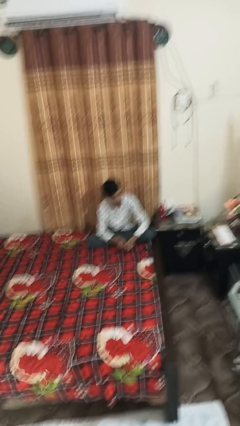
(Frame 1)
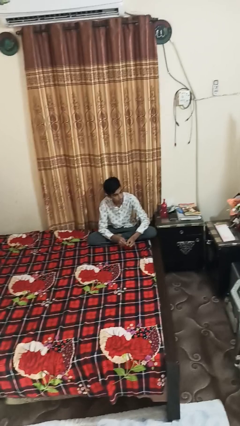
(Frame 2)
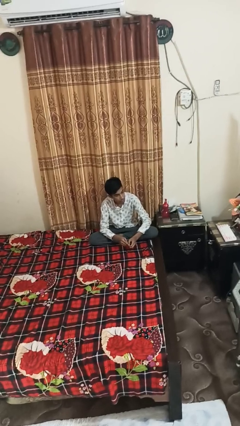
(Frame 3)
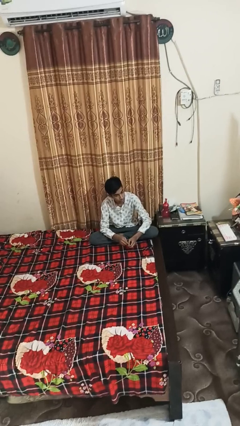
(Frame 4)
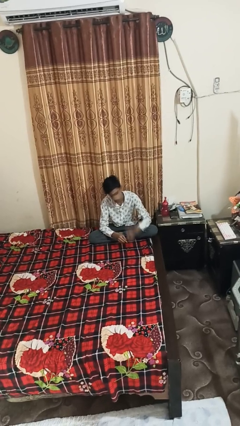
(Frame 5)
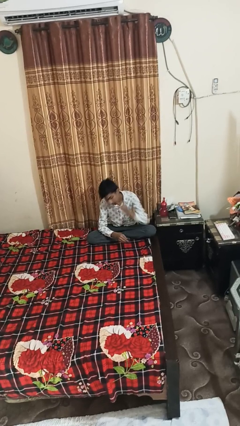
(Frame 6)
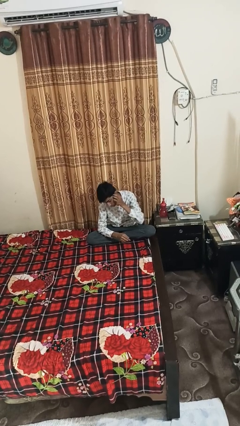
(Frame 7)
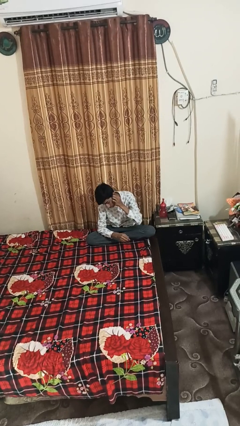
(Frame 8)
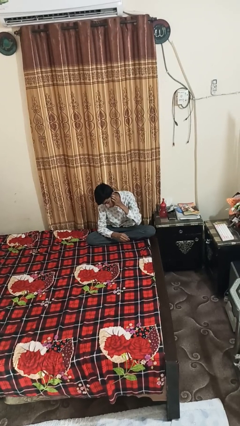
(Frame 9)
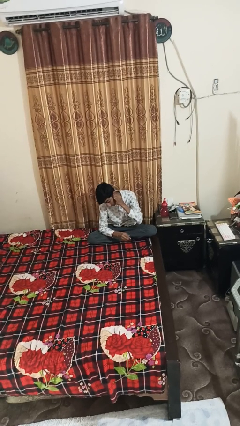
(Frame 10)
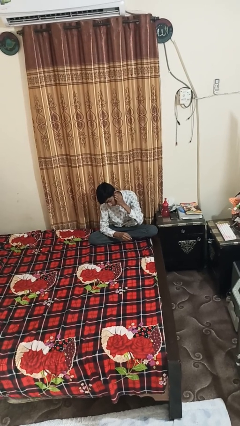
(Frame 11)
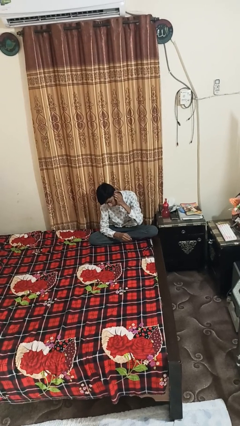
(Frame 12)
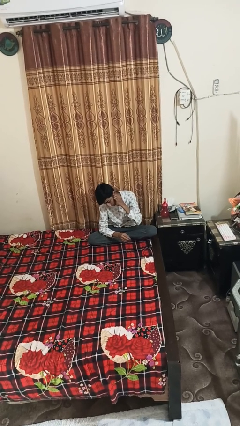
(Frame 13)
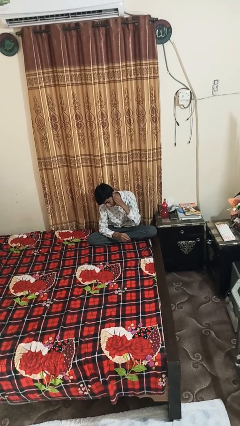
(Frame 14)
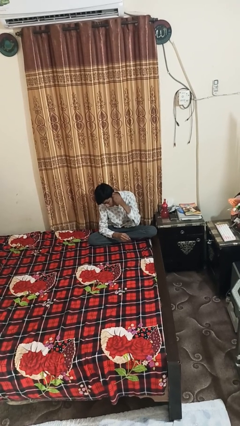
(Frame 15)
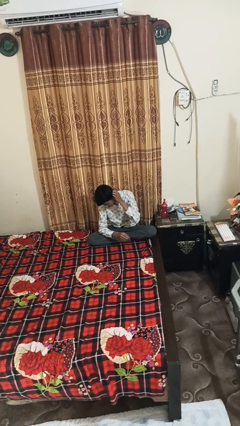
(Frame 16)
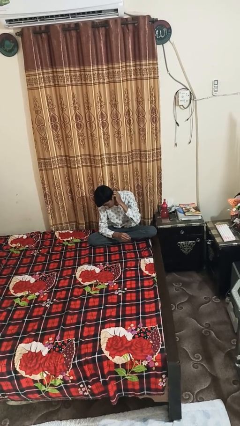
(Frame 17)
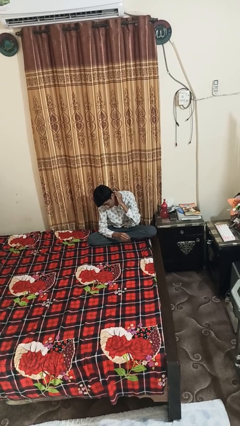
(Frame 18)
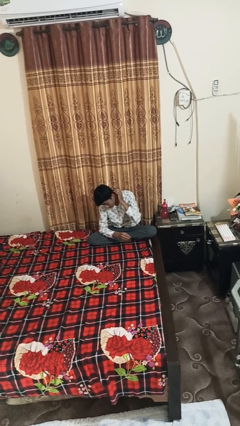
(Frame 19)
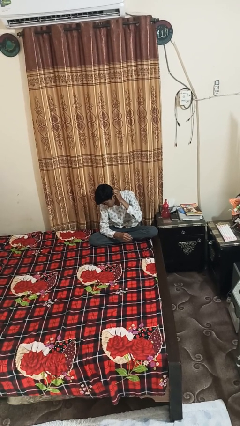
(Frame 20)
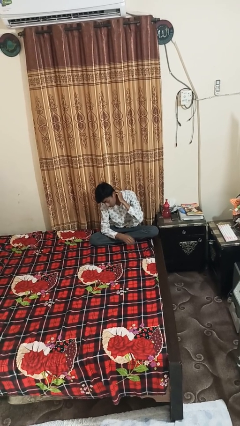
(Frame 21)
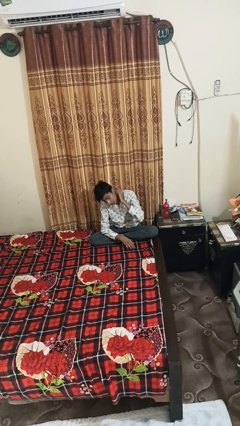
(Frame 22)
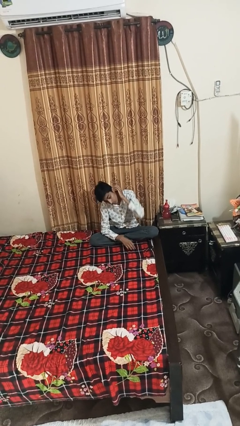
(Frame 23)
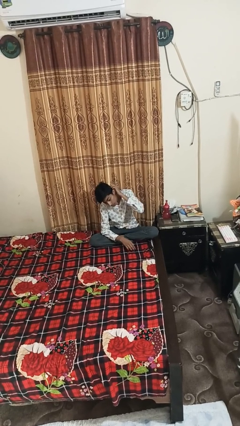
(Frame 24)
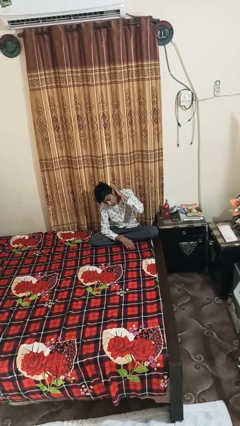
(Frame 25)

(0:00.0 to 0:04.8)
person strokes hair

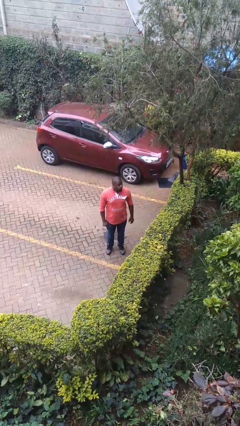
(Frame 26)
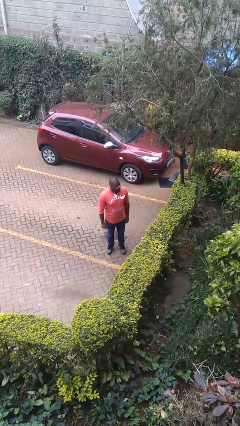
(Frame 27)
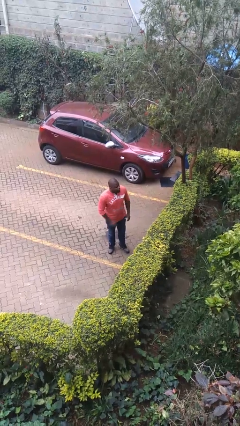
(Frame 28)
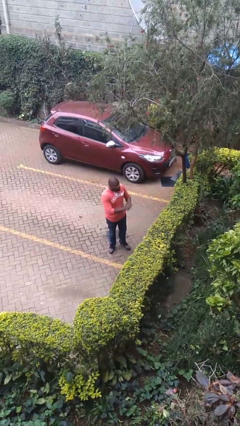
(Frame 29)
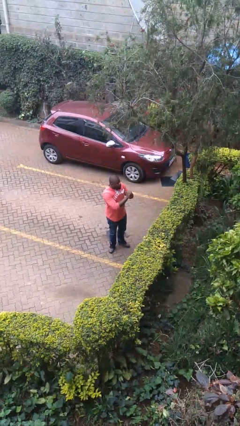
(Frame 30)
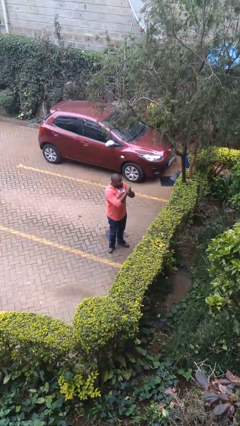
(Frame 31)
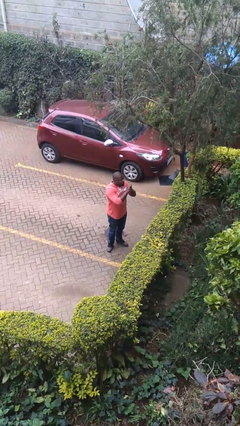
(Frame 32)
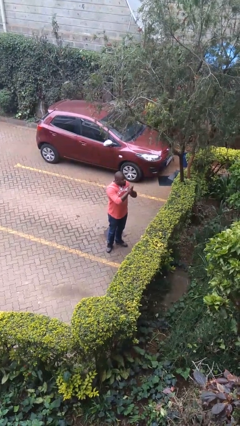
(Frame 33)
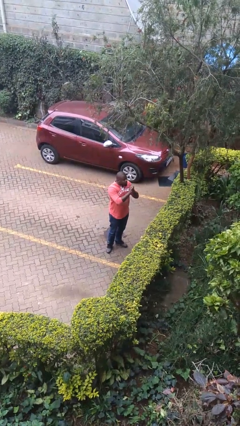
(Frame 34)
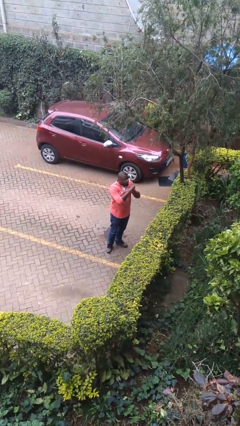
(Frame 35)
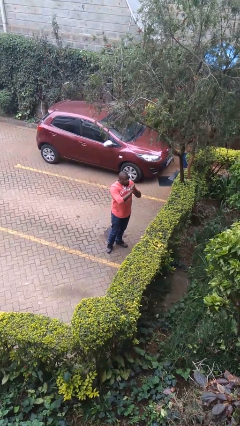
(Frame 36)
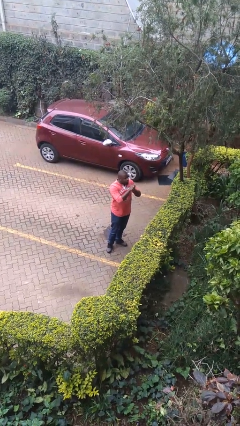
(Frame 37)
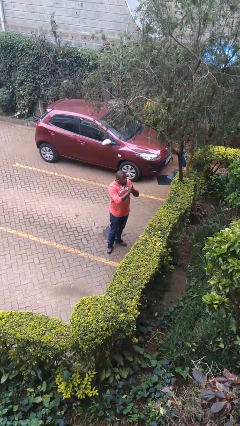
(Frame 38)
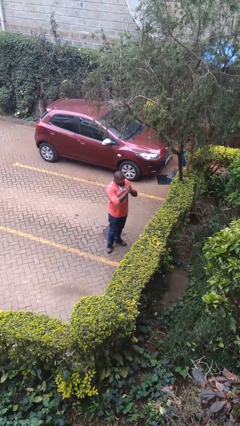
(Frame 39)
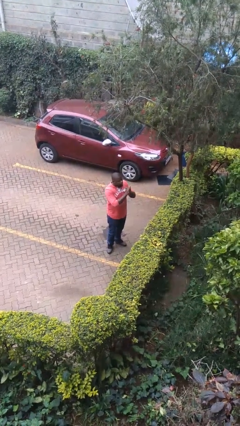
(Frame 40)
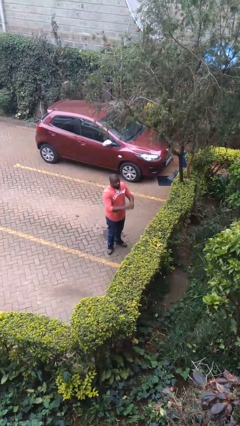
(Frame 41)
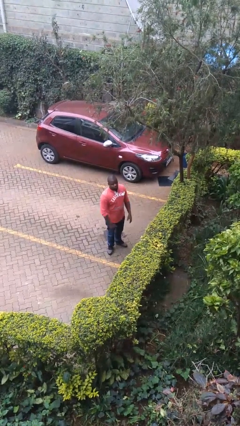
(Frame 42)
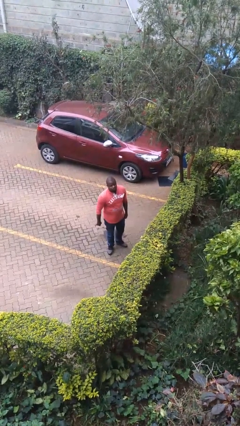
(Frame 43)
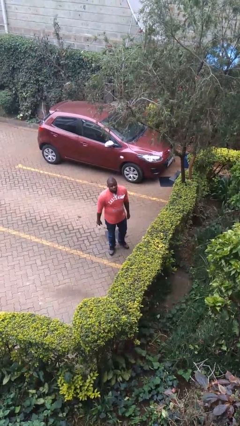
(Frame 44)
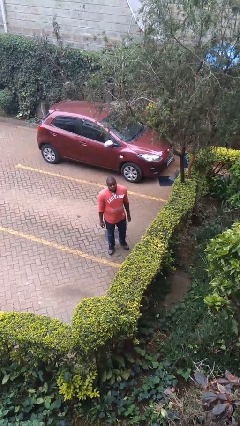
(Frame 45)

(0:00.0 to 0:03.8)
person blows into hands

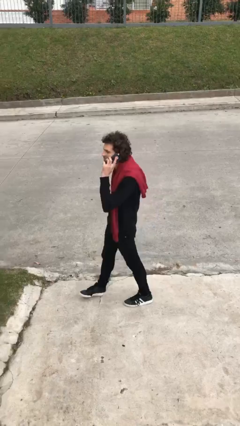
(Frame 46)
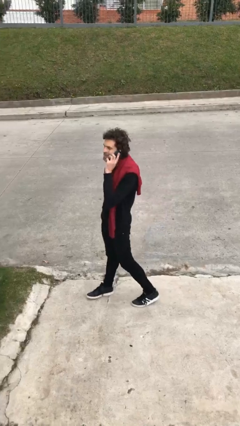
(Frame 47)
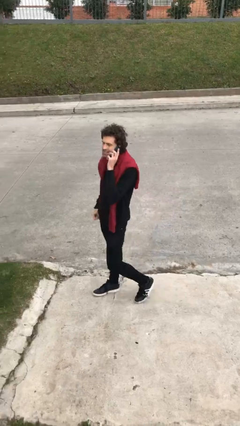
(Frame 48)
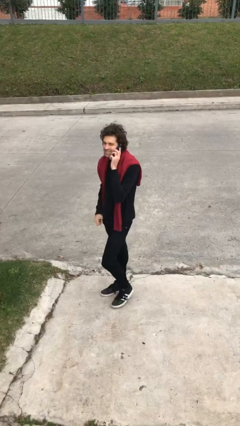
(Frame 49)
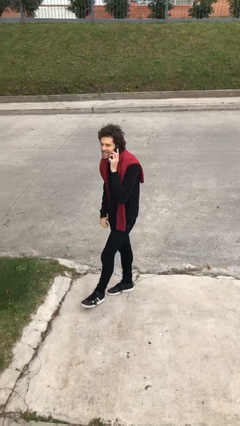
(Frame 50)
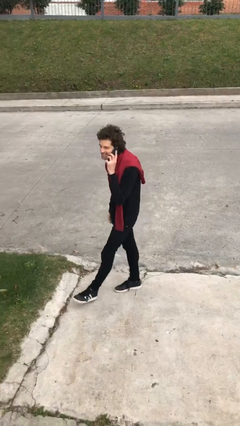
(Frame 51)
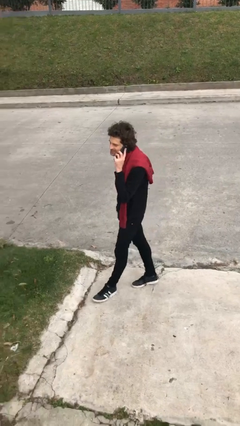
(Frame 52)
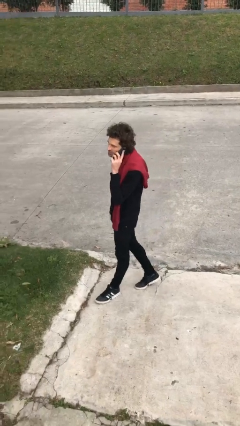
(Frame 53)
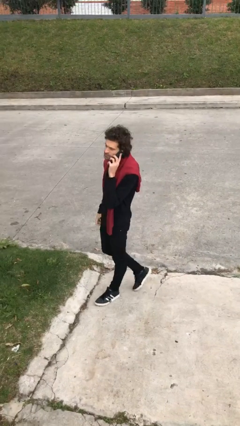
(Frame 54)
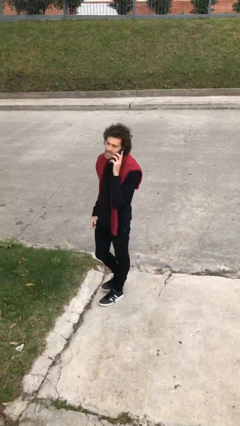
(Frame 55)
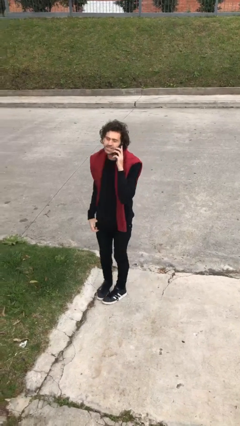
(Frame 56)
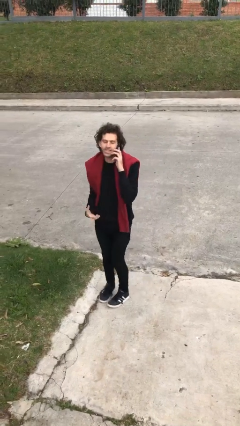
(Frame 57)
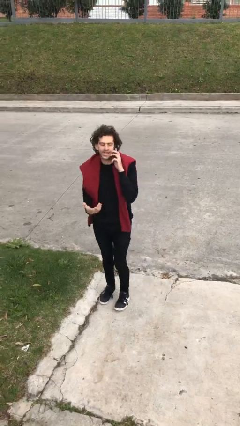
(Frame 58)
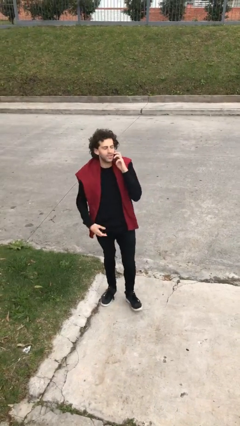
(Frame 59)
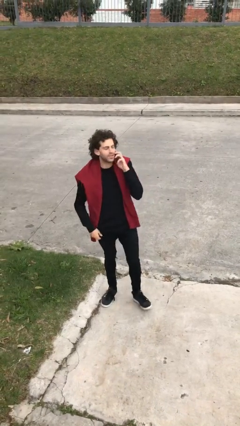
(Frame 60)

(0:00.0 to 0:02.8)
person talks on phone

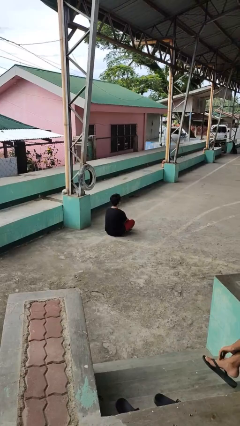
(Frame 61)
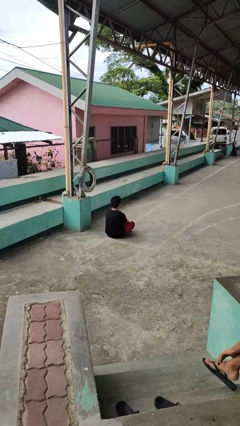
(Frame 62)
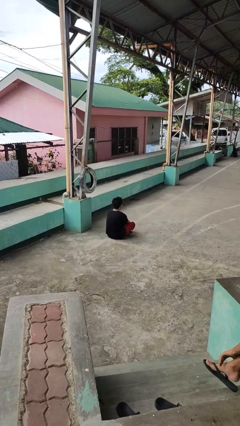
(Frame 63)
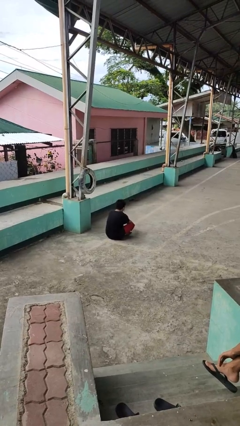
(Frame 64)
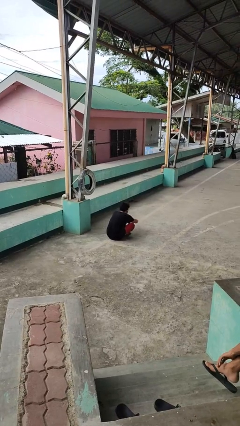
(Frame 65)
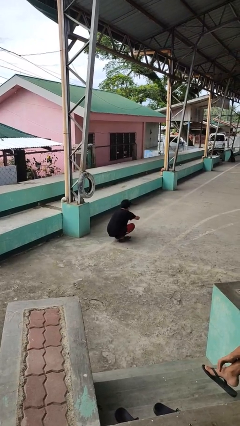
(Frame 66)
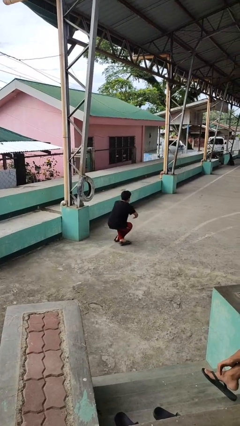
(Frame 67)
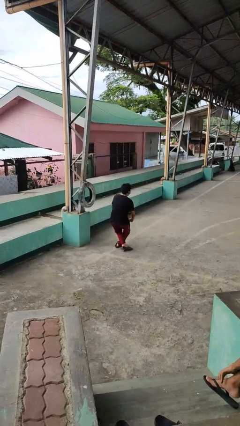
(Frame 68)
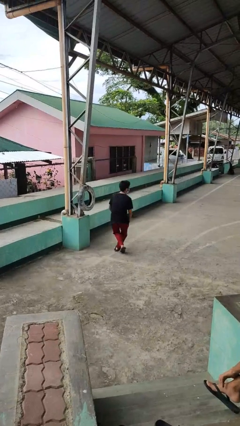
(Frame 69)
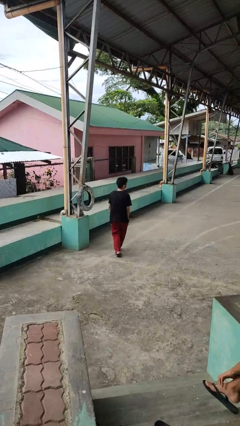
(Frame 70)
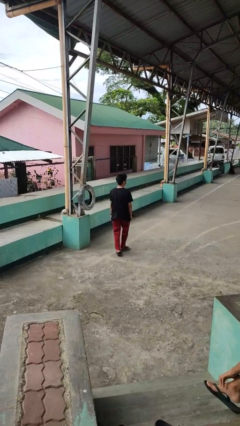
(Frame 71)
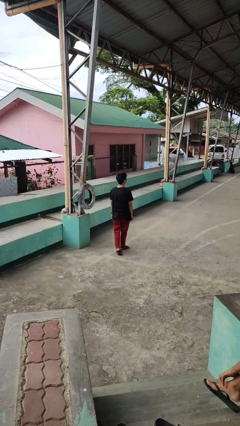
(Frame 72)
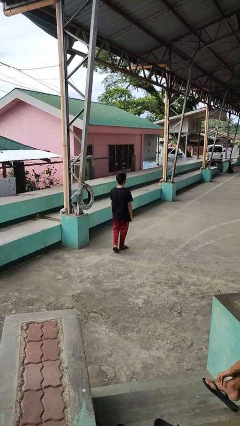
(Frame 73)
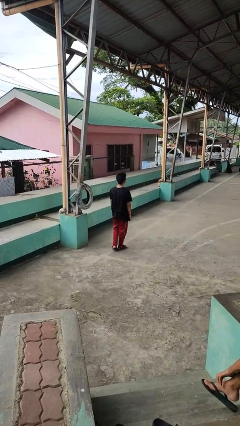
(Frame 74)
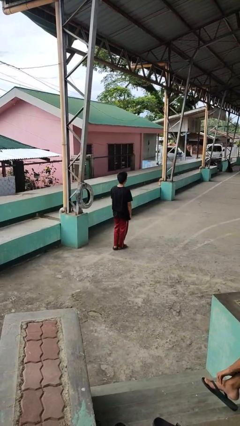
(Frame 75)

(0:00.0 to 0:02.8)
person stands up from floor

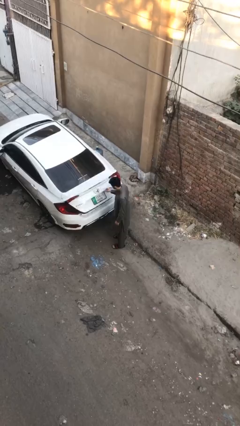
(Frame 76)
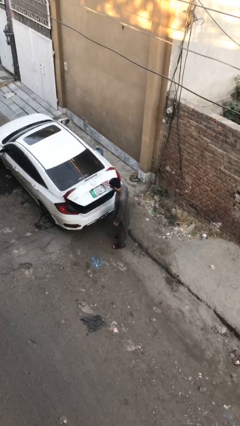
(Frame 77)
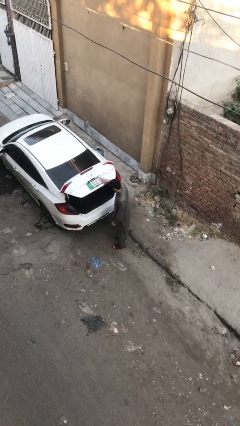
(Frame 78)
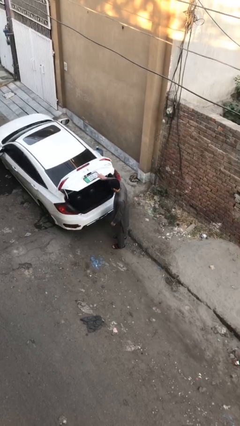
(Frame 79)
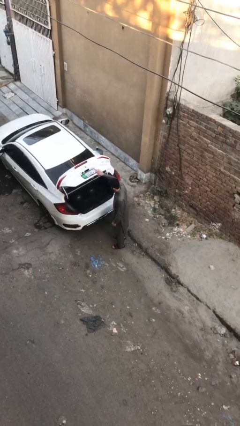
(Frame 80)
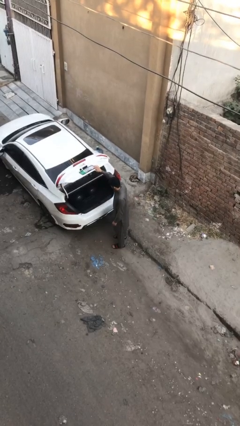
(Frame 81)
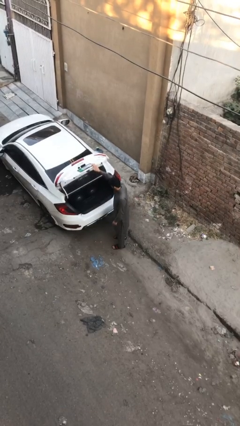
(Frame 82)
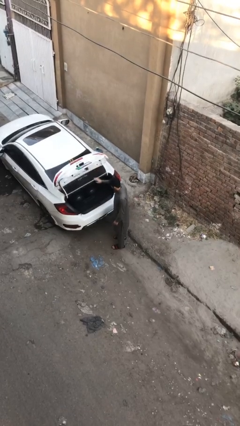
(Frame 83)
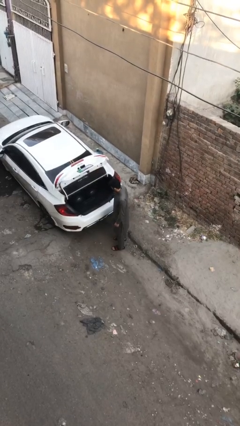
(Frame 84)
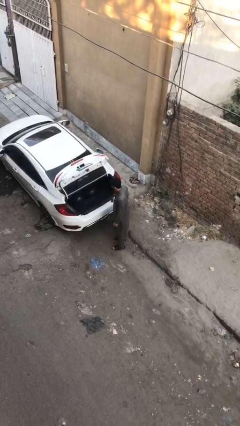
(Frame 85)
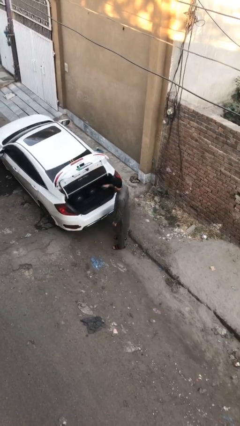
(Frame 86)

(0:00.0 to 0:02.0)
person opens car trunk

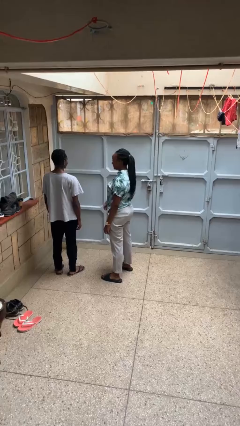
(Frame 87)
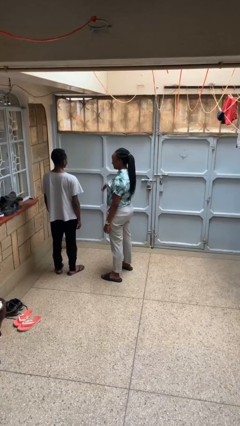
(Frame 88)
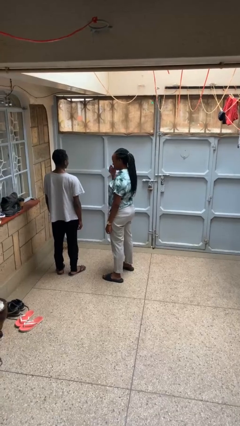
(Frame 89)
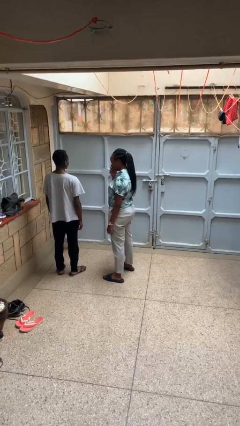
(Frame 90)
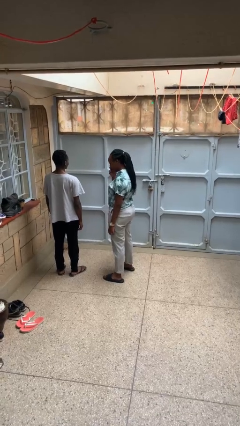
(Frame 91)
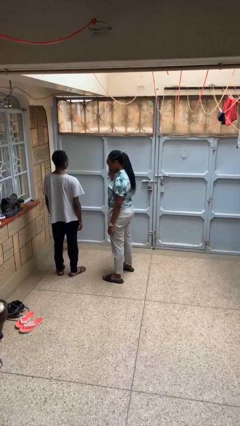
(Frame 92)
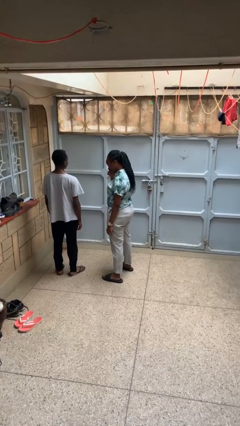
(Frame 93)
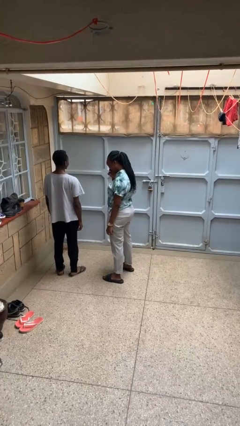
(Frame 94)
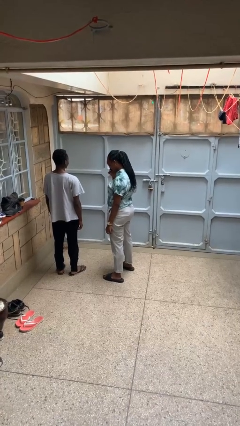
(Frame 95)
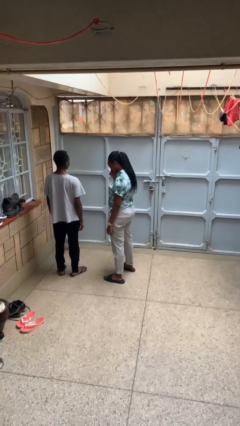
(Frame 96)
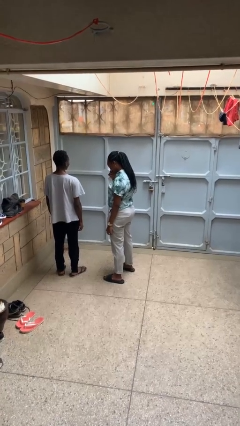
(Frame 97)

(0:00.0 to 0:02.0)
person laughs with person
